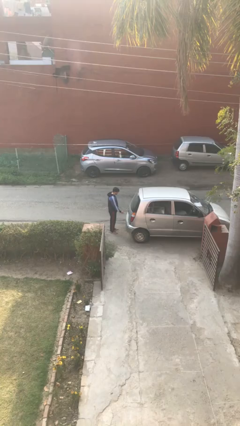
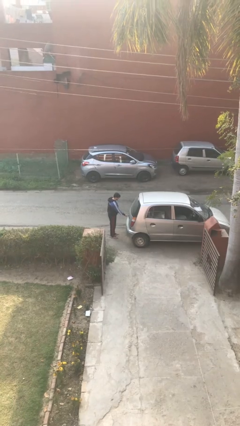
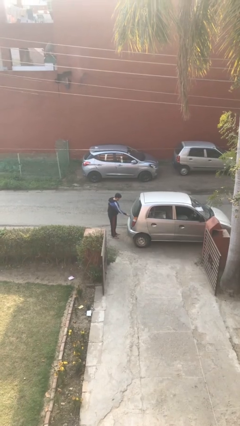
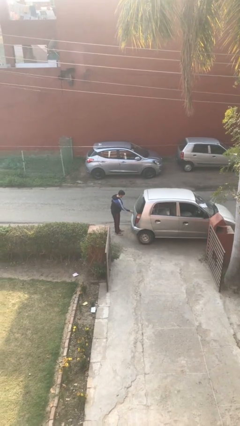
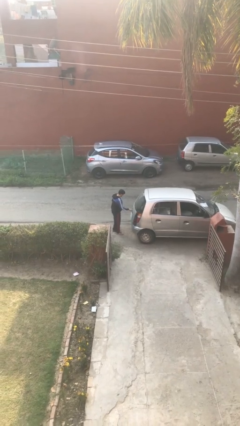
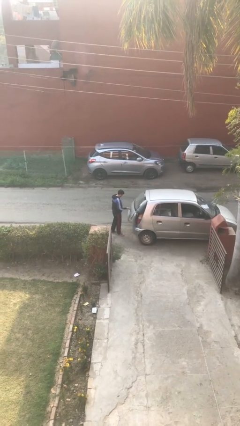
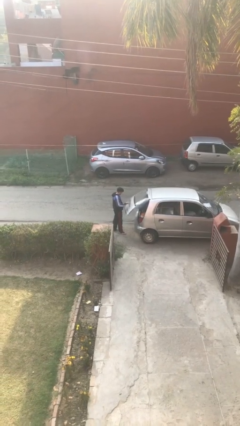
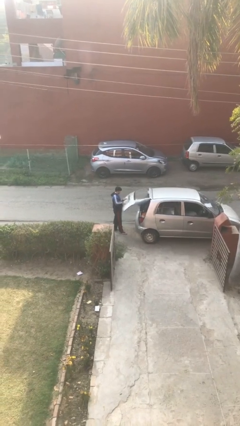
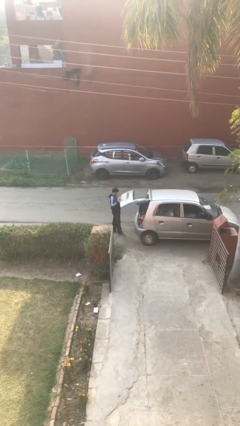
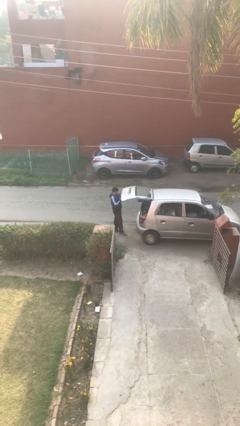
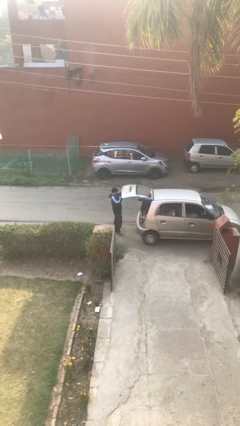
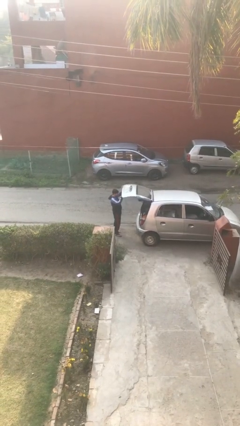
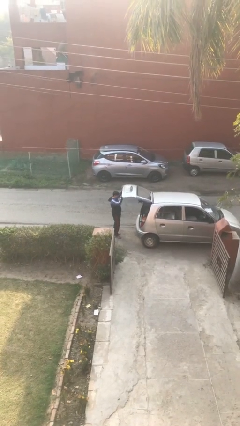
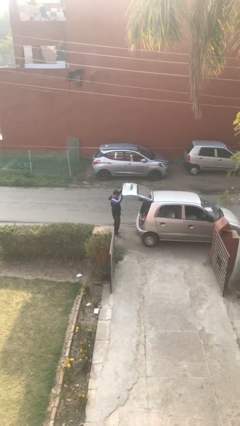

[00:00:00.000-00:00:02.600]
person opens car trunk

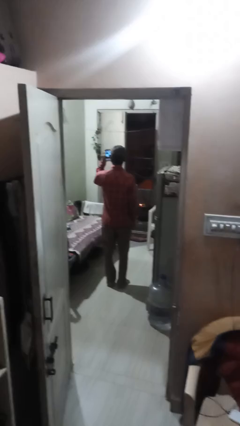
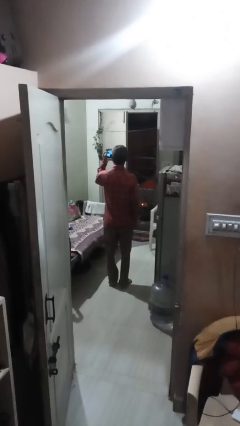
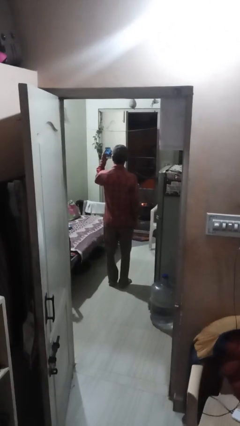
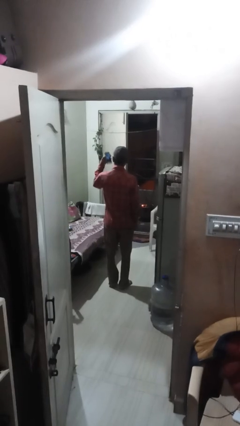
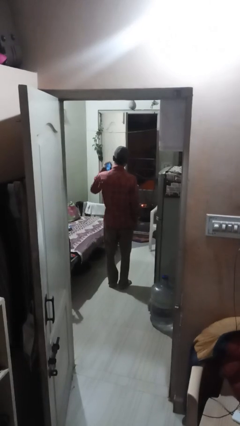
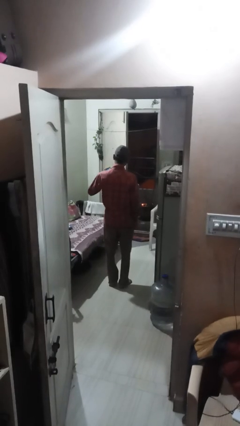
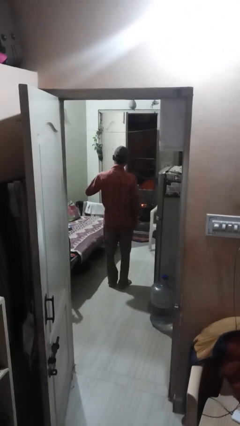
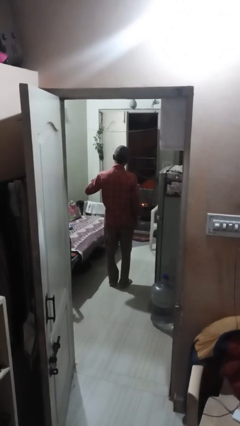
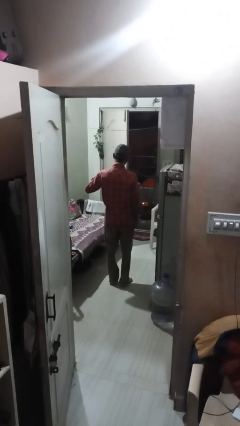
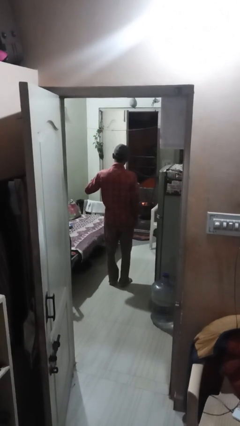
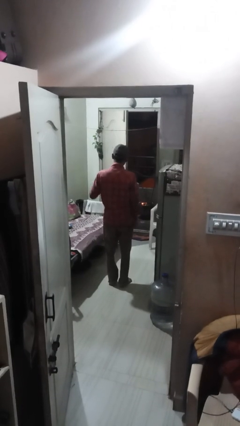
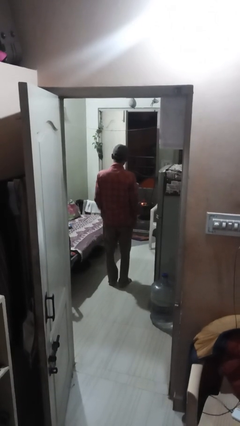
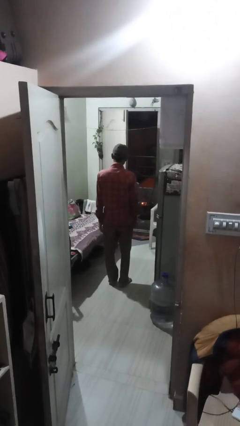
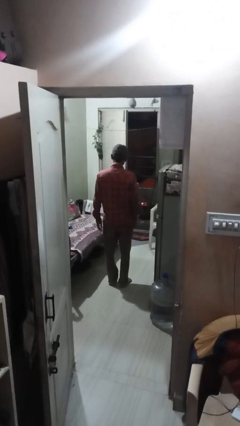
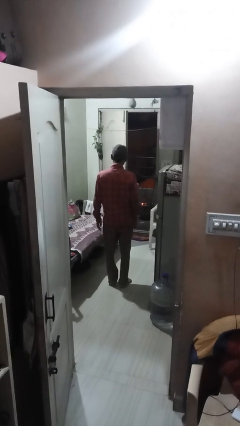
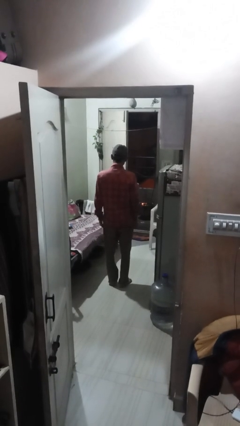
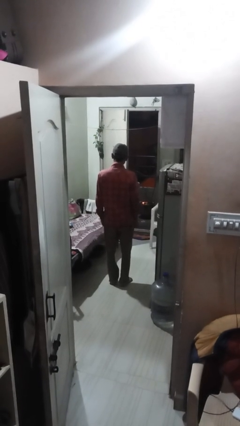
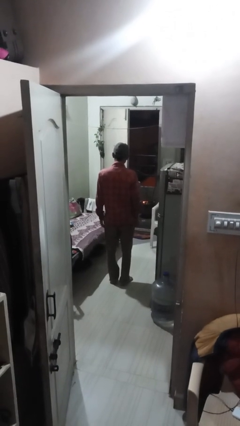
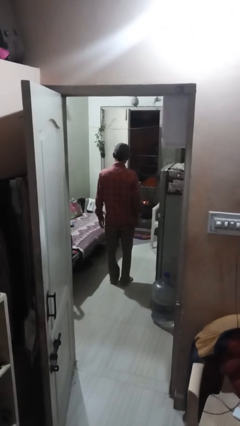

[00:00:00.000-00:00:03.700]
person puts phone into pocket

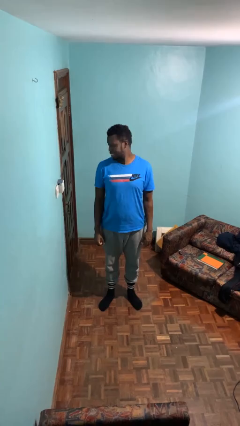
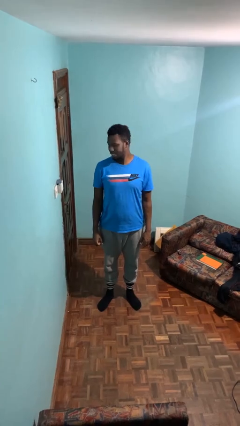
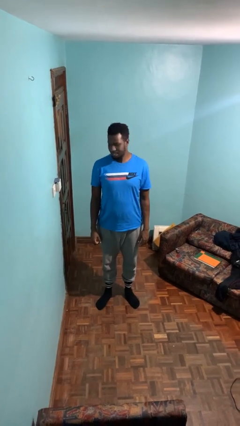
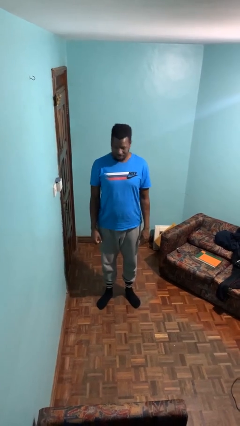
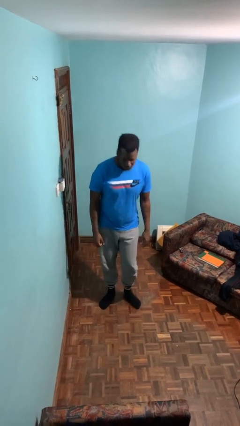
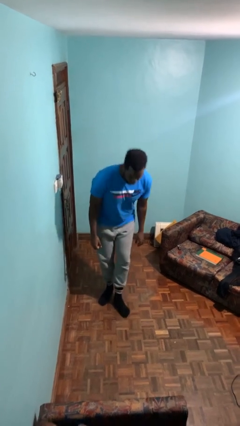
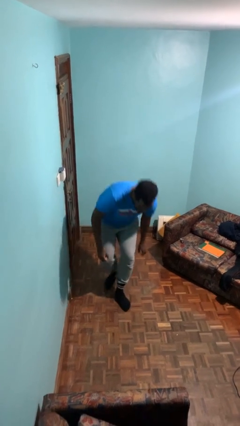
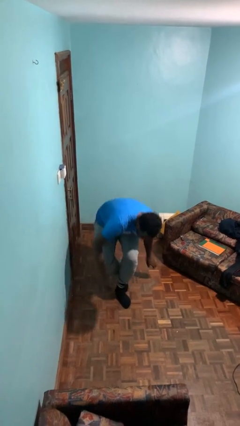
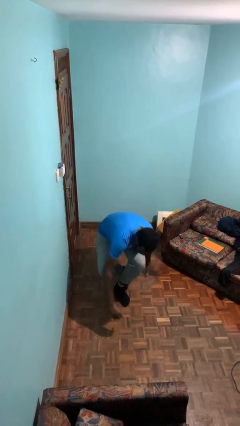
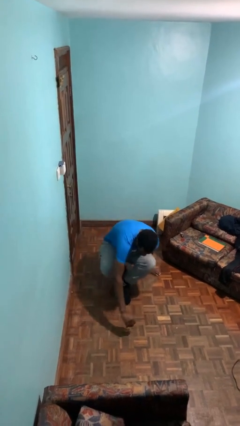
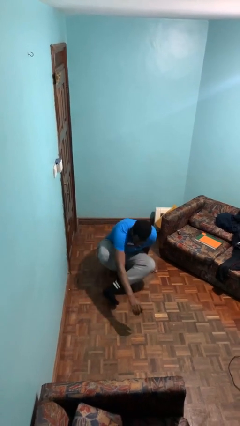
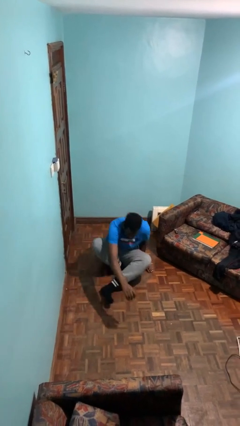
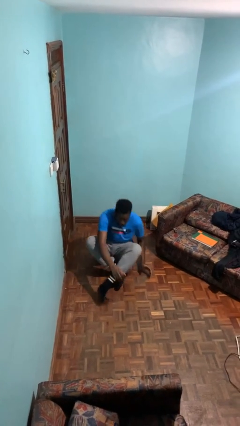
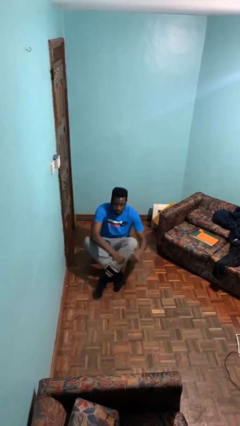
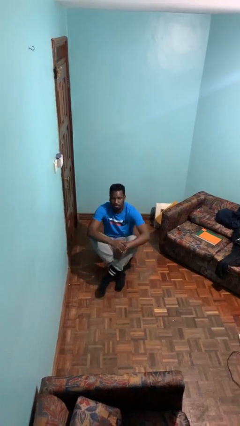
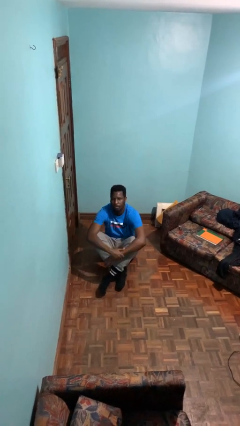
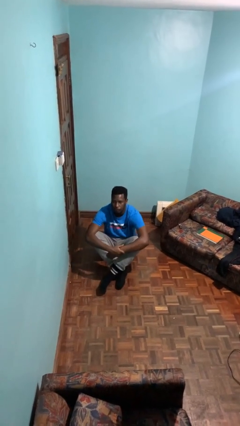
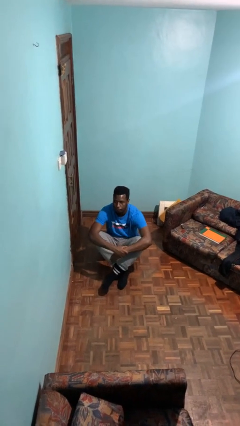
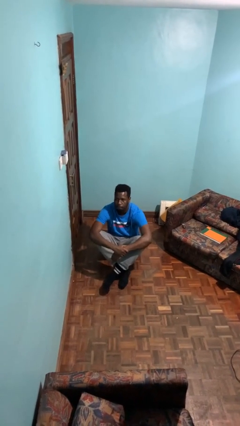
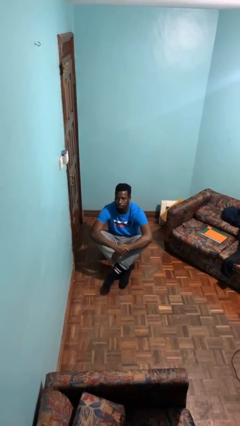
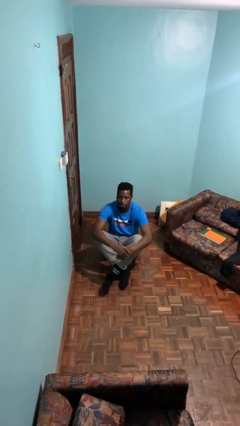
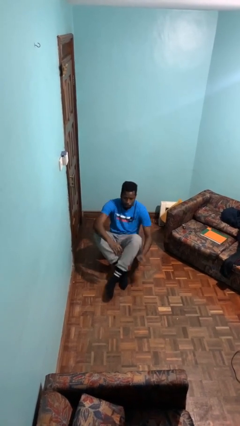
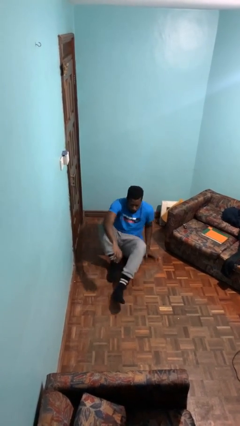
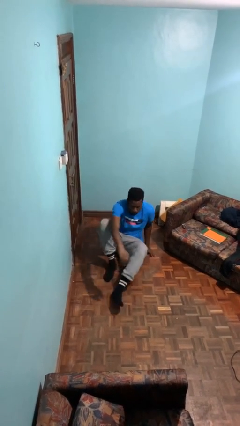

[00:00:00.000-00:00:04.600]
person sits crisscross

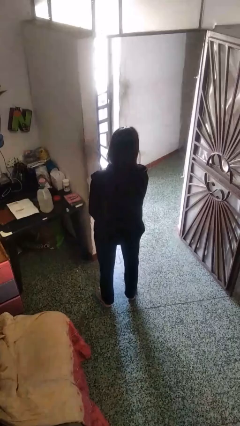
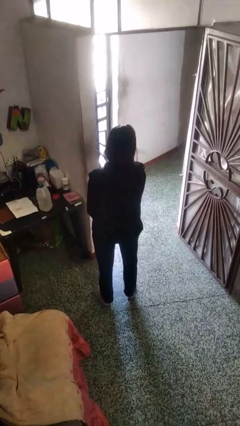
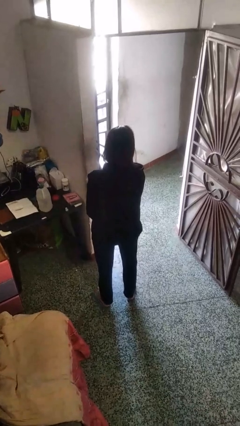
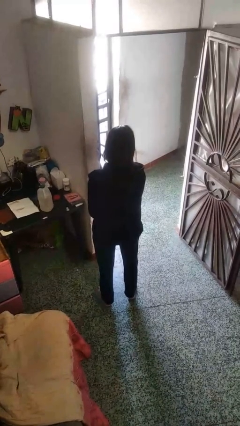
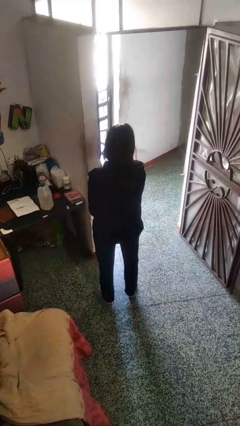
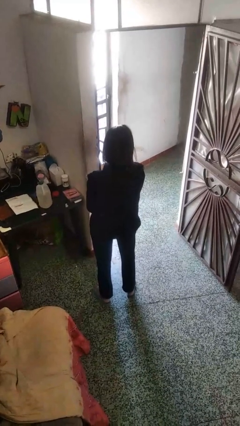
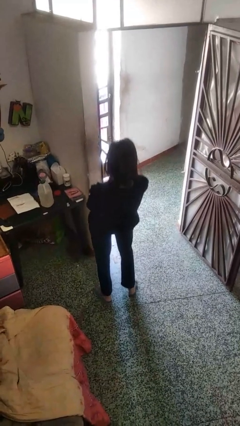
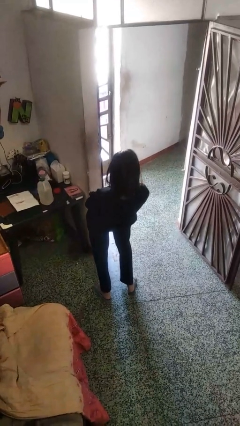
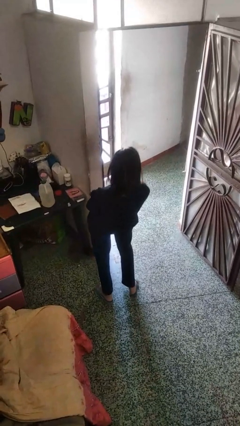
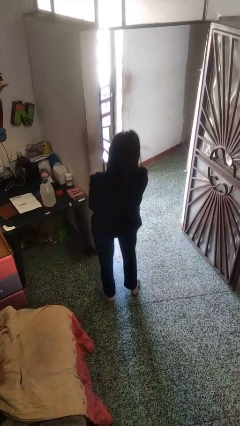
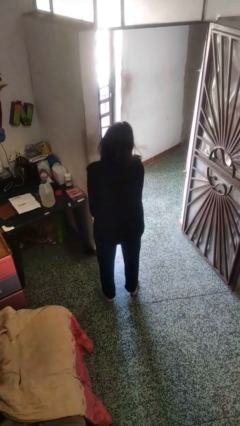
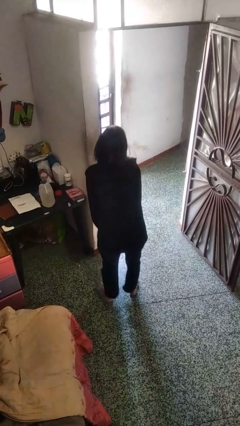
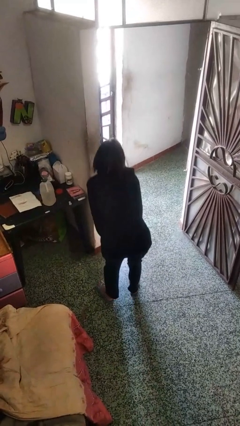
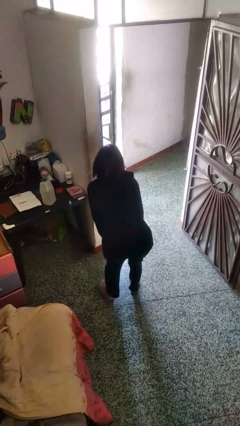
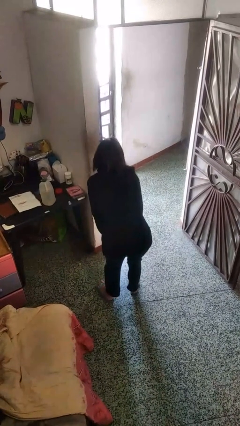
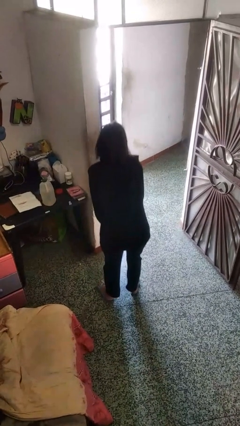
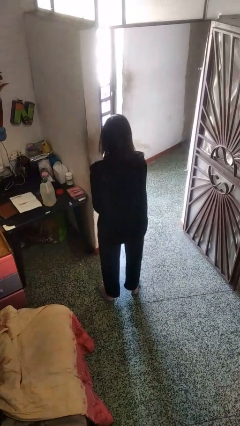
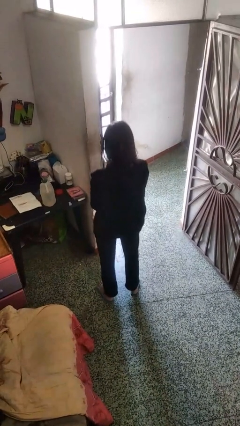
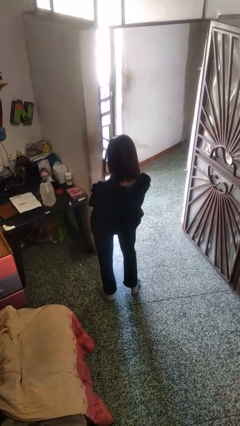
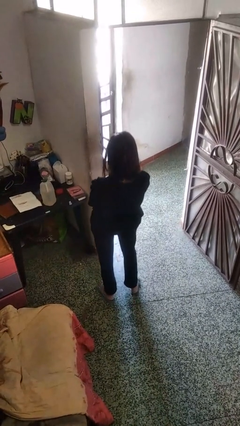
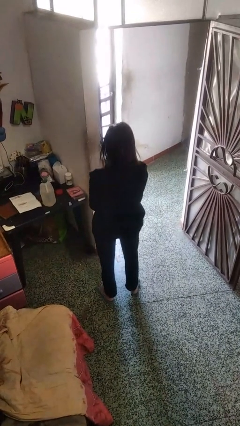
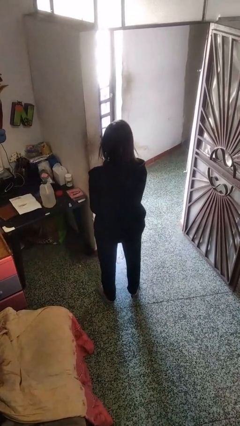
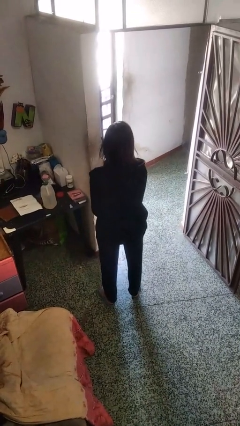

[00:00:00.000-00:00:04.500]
person wiggles hips

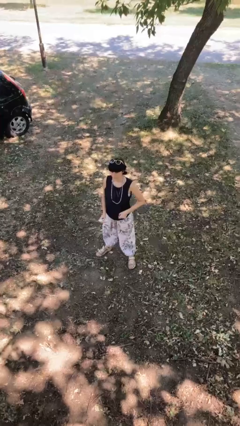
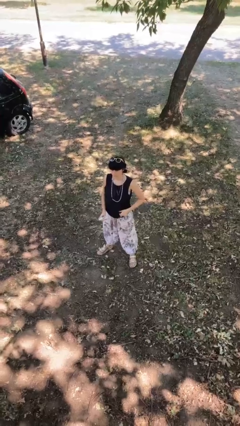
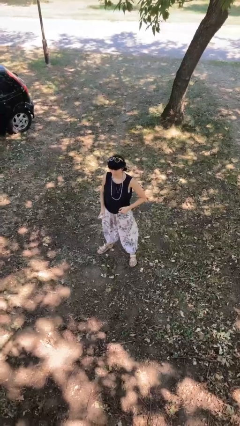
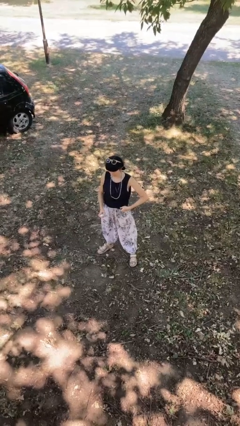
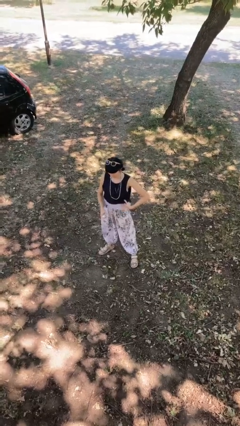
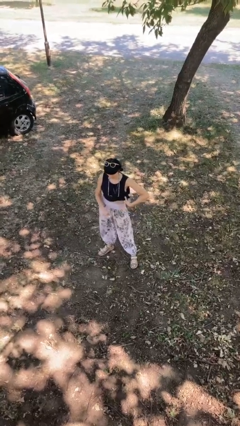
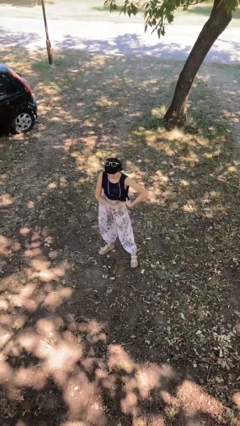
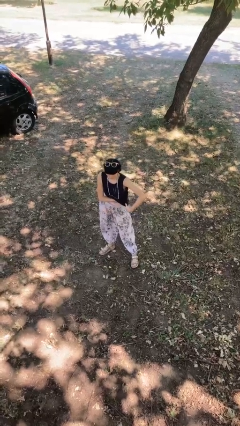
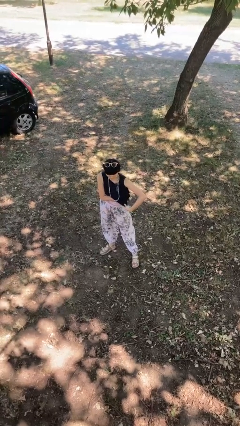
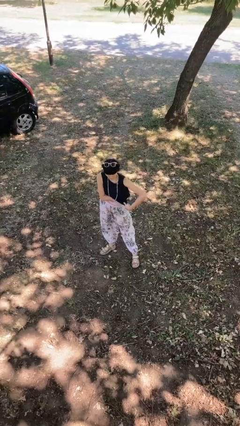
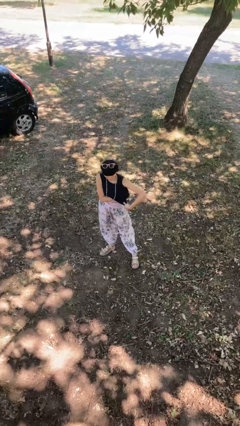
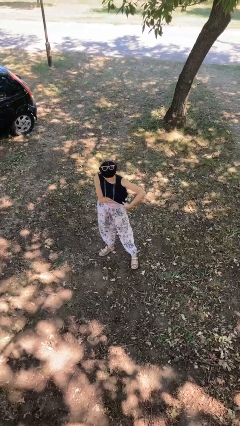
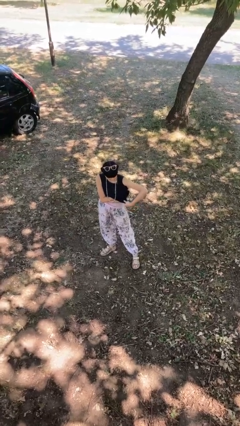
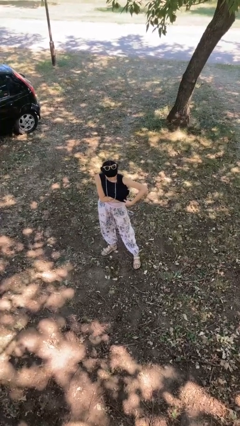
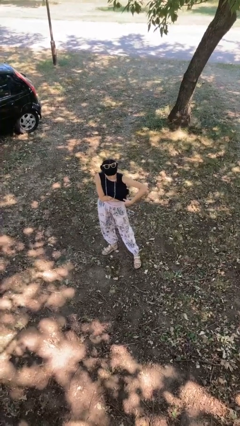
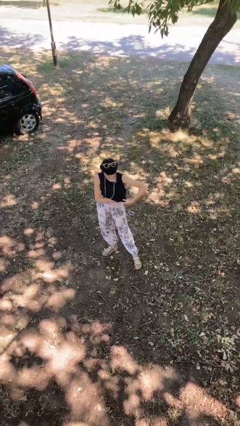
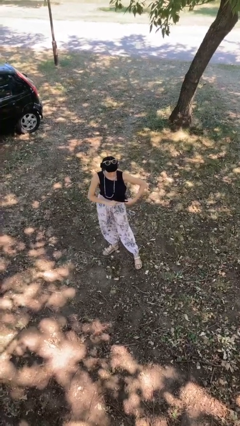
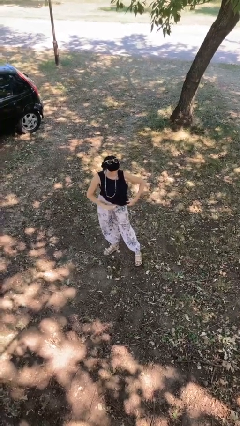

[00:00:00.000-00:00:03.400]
person applies deodorant
